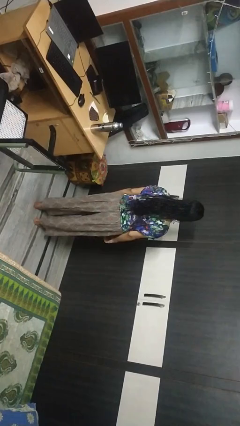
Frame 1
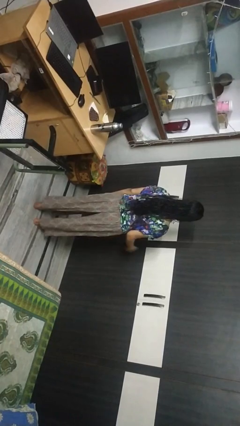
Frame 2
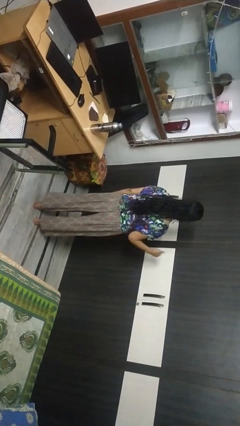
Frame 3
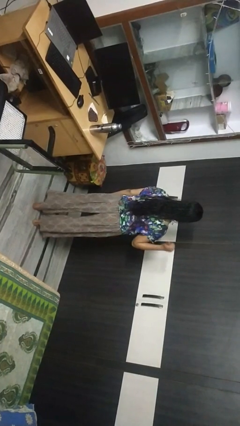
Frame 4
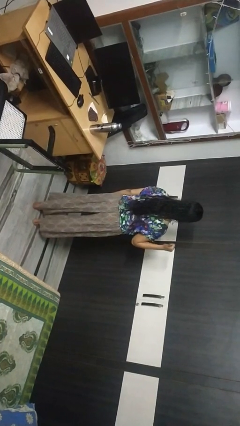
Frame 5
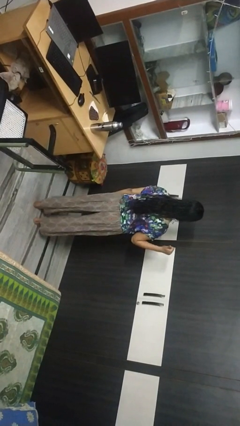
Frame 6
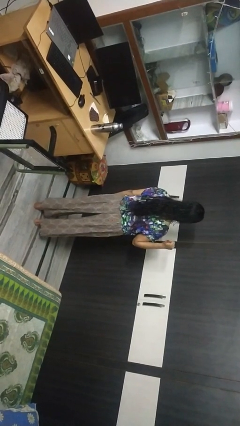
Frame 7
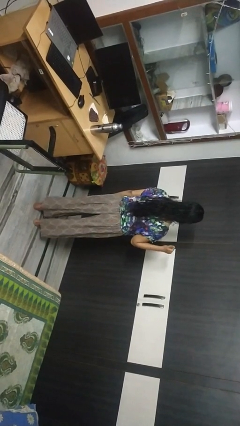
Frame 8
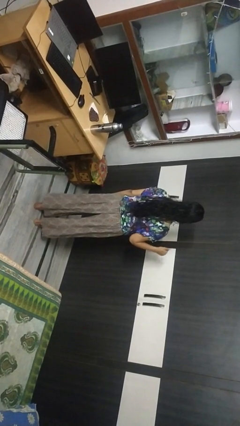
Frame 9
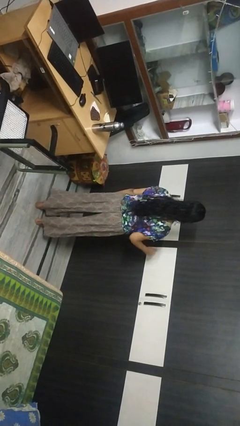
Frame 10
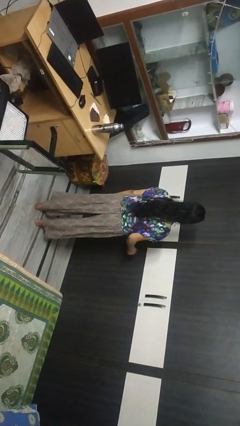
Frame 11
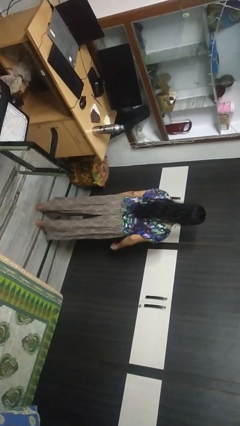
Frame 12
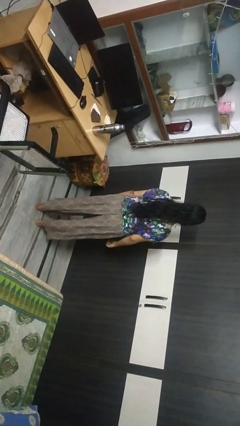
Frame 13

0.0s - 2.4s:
person gestures behind me

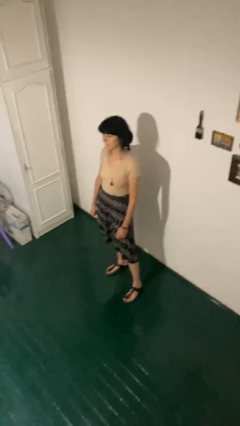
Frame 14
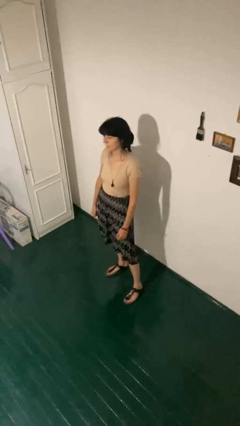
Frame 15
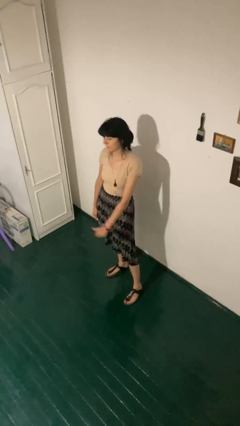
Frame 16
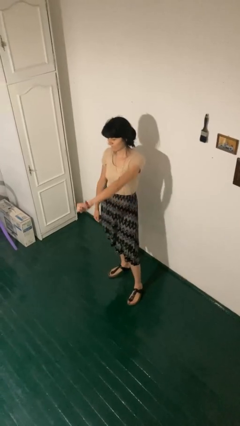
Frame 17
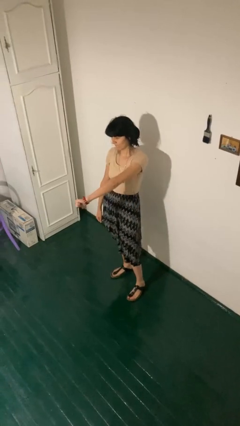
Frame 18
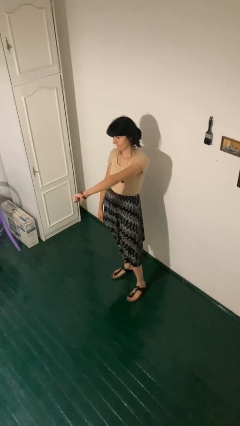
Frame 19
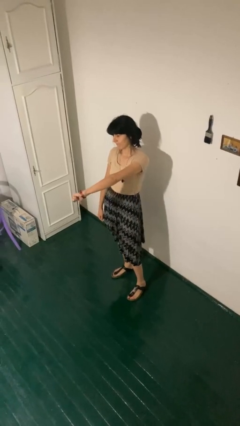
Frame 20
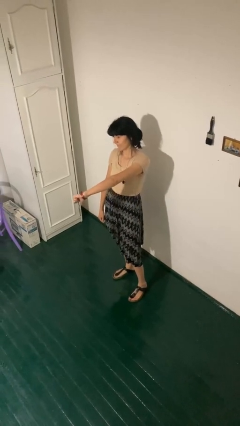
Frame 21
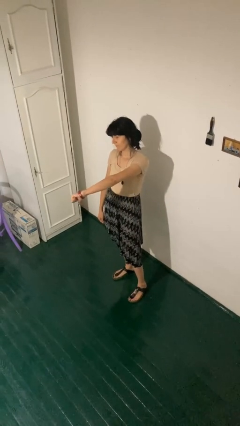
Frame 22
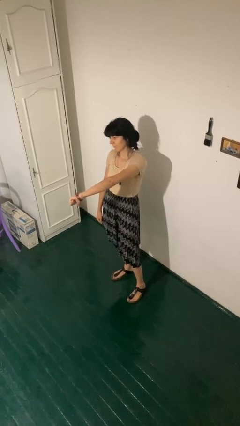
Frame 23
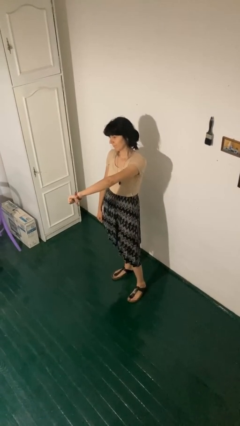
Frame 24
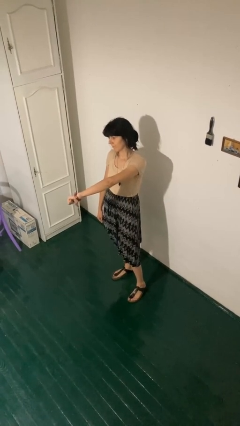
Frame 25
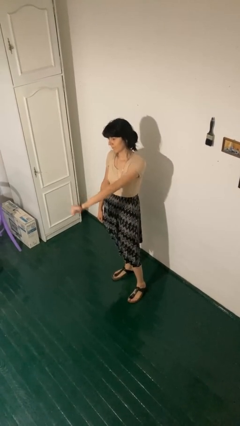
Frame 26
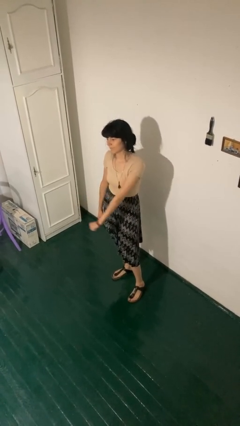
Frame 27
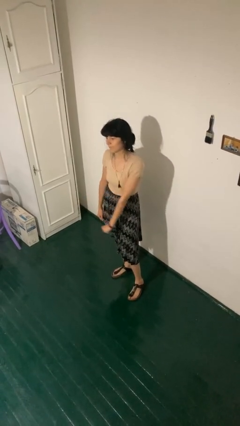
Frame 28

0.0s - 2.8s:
person gestures thumbs down

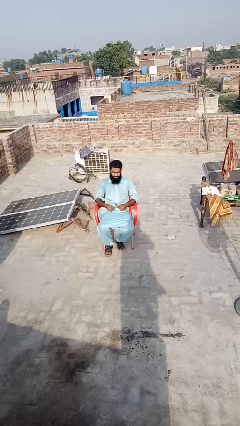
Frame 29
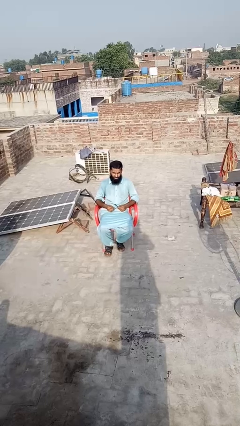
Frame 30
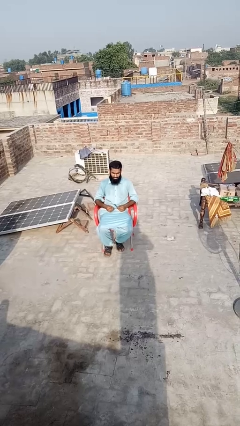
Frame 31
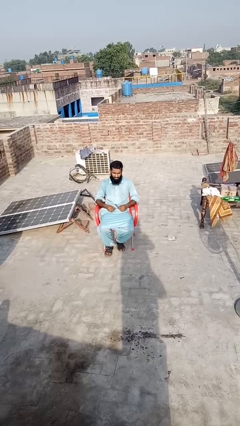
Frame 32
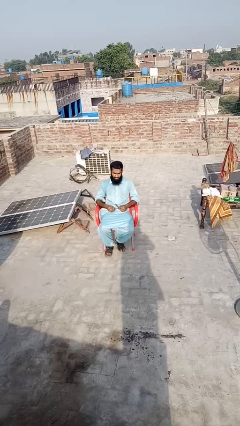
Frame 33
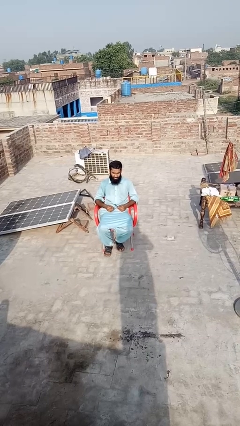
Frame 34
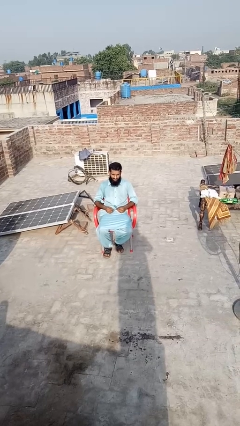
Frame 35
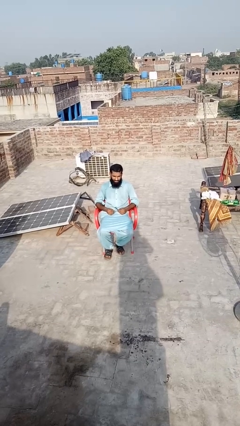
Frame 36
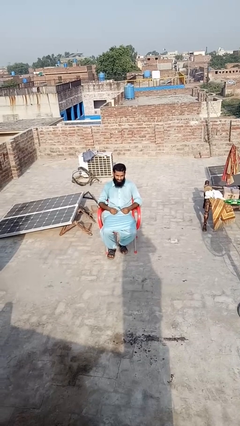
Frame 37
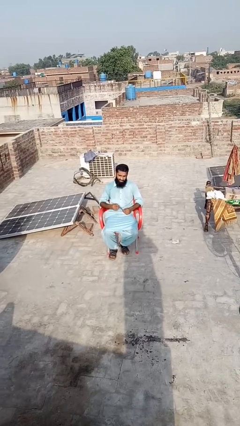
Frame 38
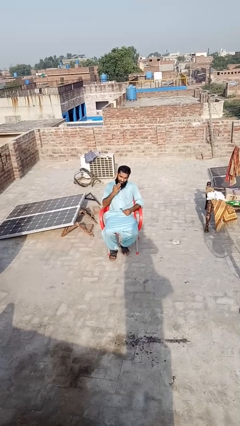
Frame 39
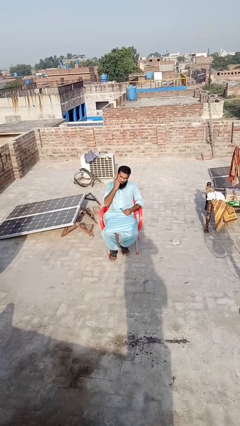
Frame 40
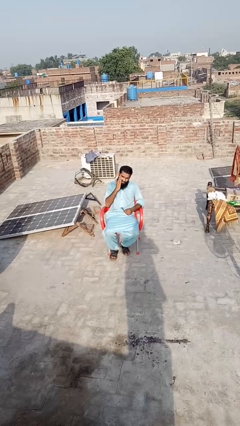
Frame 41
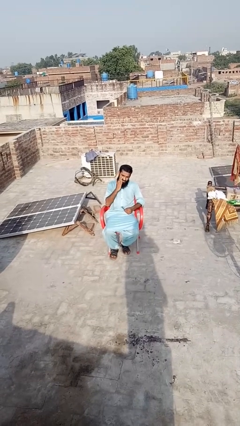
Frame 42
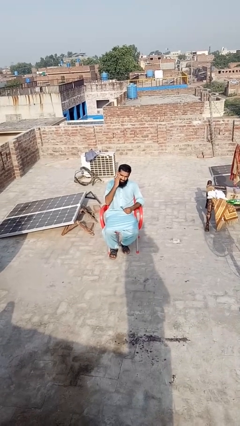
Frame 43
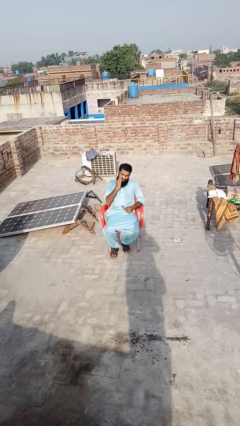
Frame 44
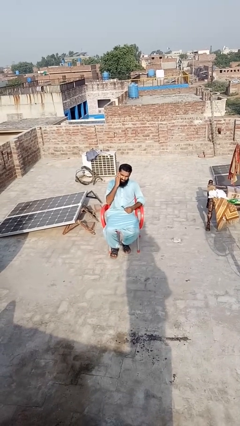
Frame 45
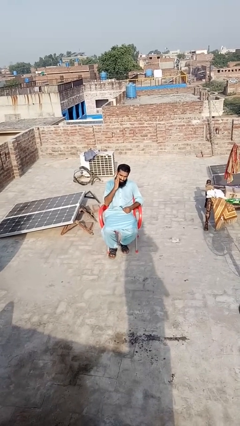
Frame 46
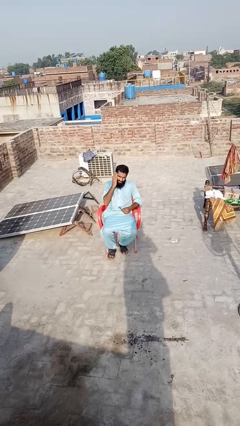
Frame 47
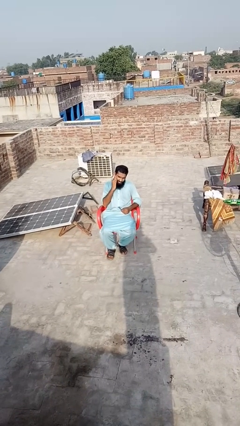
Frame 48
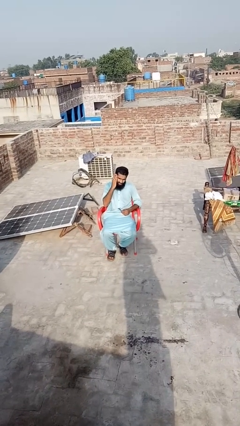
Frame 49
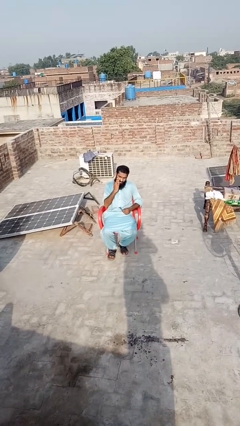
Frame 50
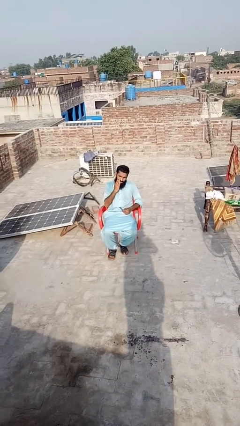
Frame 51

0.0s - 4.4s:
person applies shaving cream

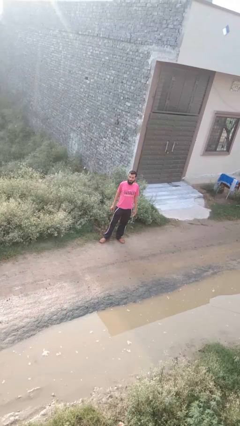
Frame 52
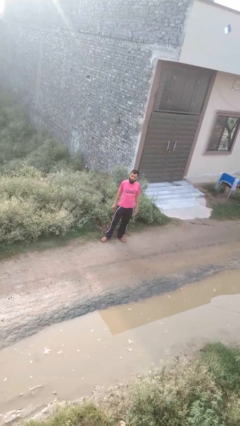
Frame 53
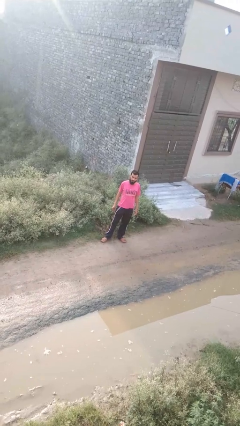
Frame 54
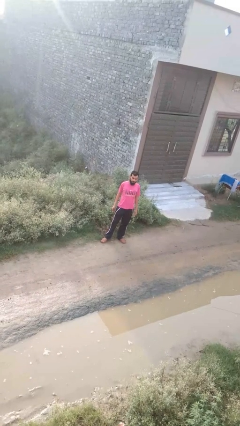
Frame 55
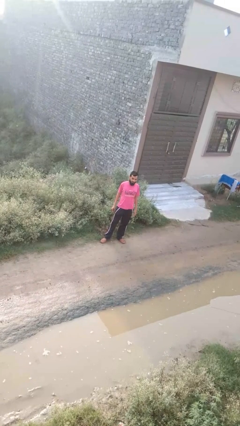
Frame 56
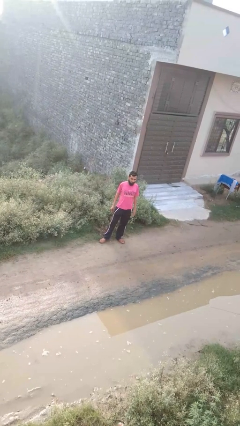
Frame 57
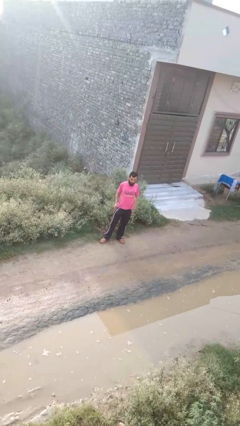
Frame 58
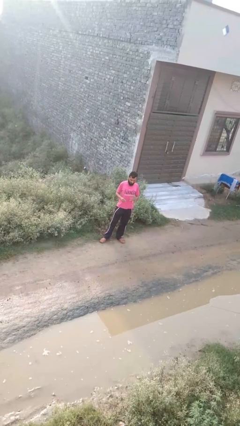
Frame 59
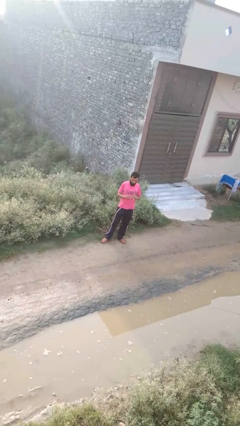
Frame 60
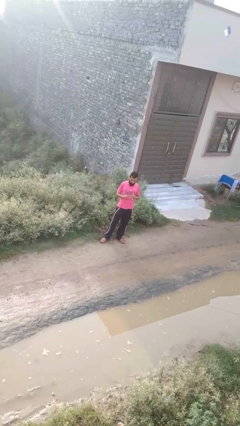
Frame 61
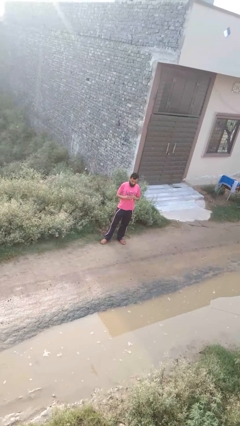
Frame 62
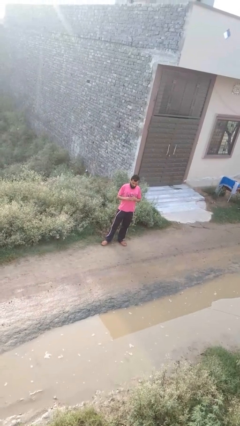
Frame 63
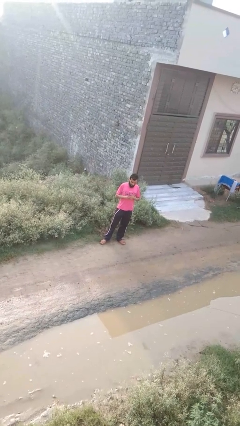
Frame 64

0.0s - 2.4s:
person puts on ring

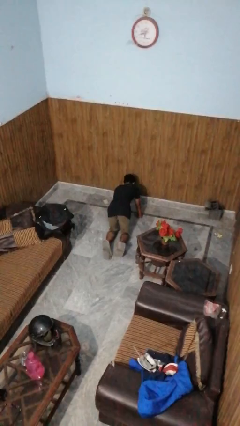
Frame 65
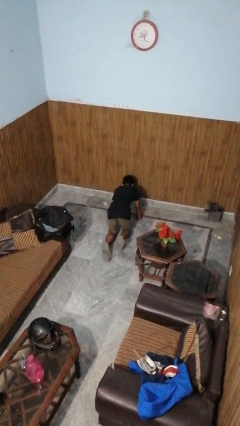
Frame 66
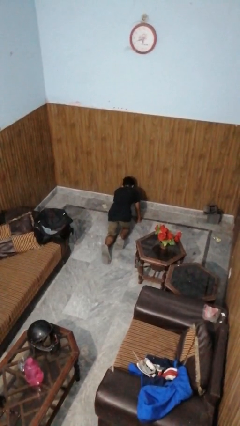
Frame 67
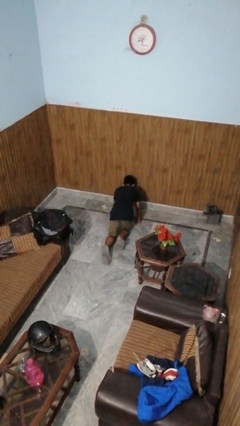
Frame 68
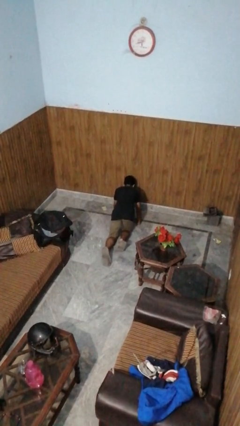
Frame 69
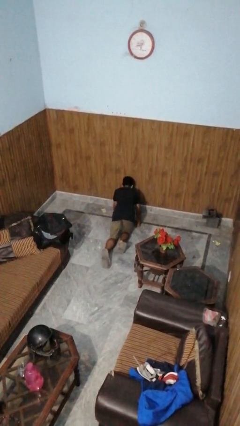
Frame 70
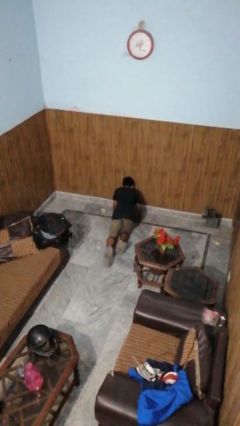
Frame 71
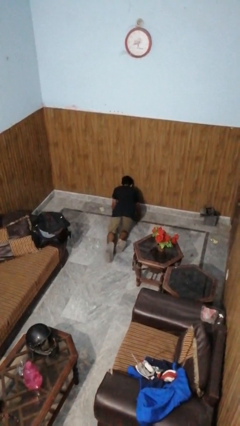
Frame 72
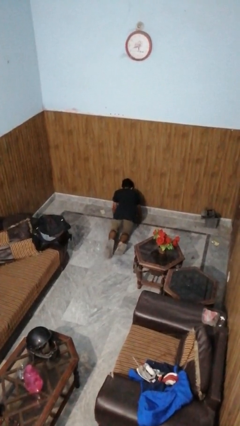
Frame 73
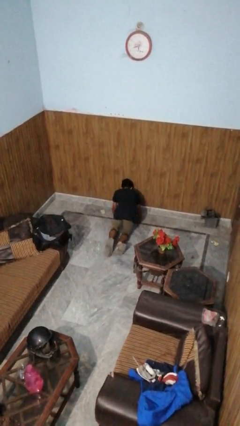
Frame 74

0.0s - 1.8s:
person crawls

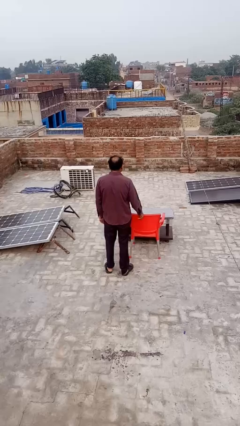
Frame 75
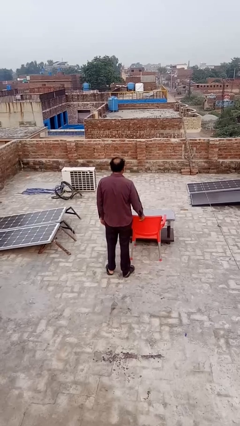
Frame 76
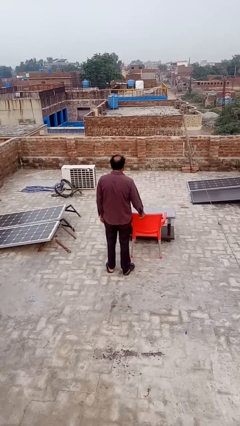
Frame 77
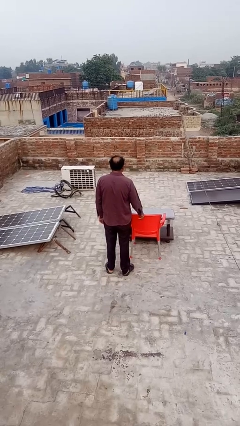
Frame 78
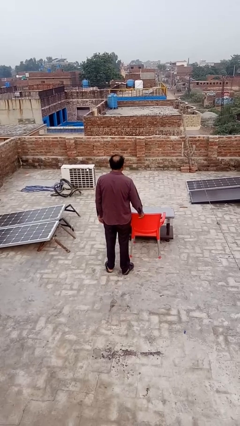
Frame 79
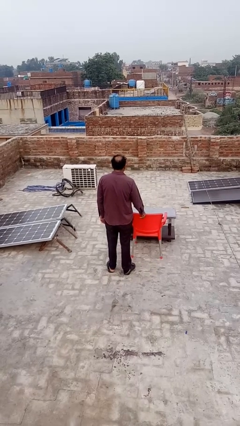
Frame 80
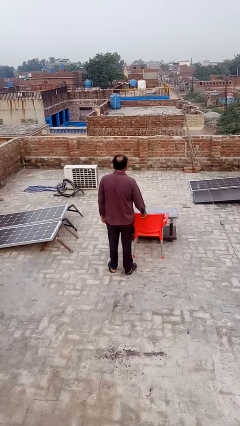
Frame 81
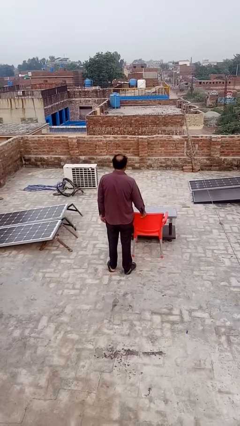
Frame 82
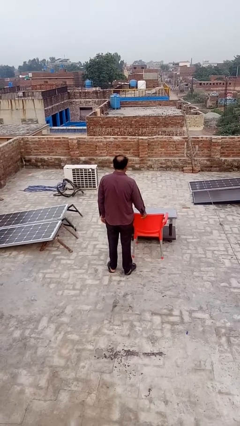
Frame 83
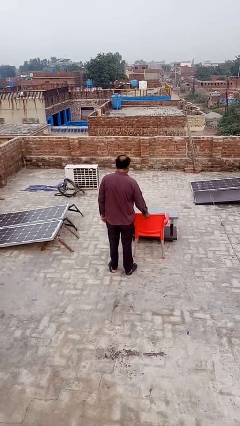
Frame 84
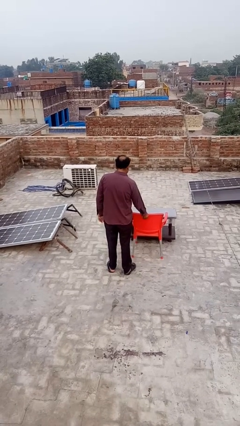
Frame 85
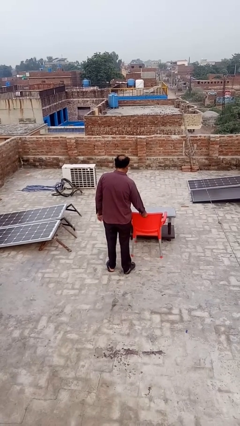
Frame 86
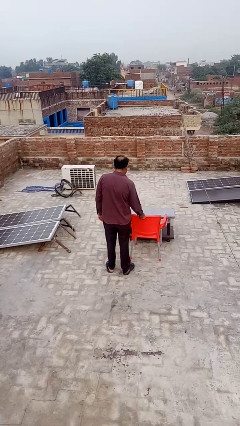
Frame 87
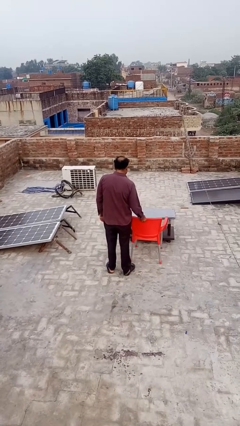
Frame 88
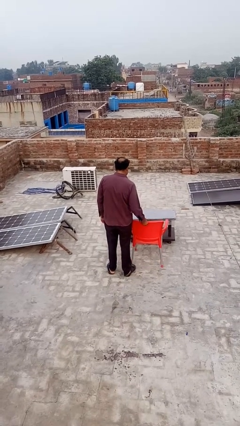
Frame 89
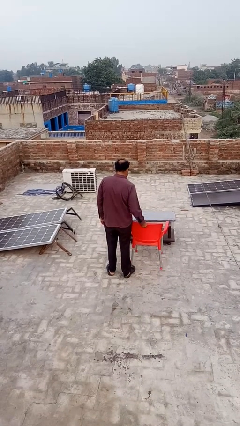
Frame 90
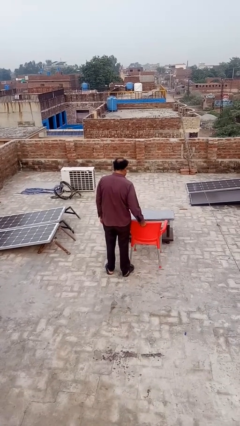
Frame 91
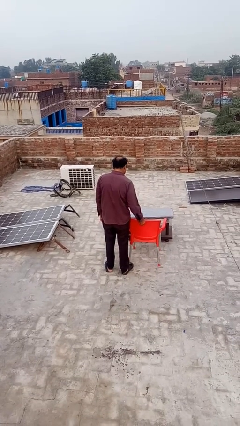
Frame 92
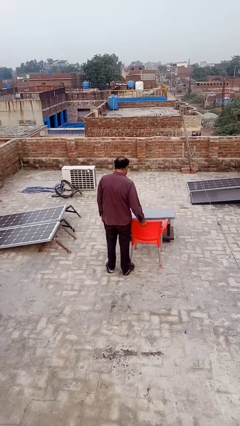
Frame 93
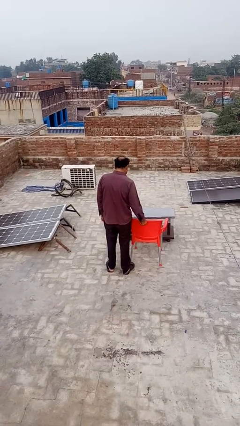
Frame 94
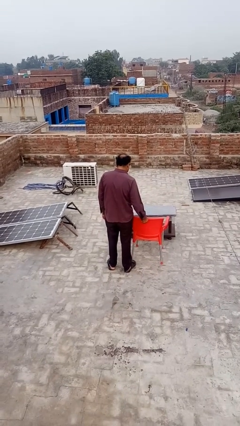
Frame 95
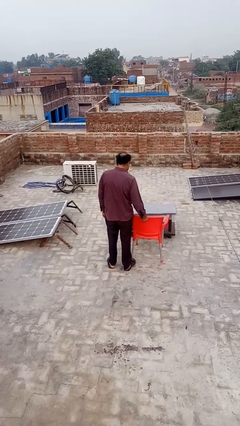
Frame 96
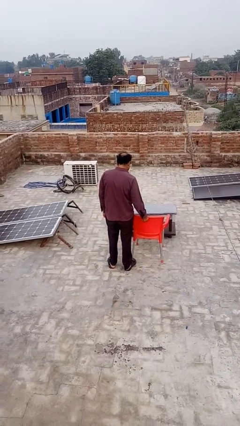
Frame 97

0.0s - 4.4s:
person pulls out chair
